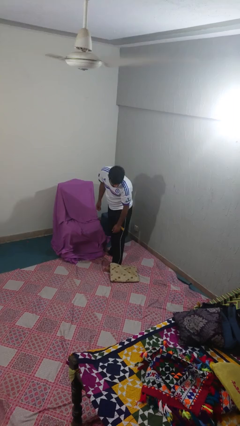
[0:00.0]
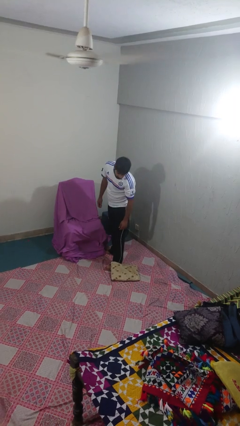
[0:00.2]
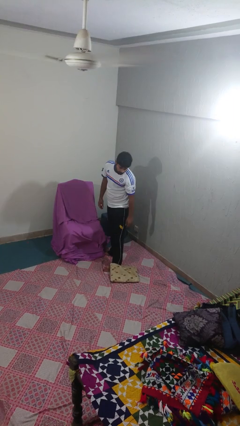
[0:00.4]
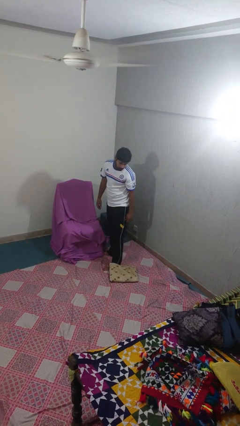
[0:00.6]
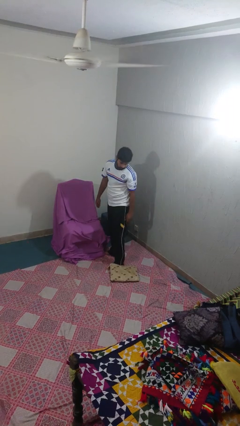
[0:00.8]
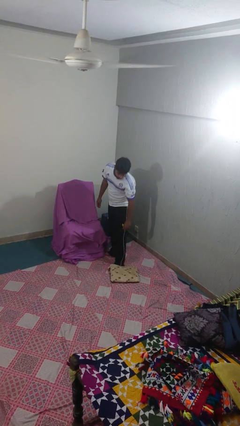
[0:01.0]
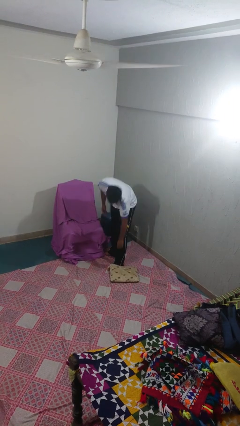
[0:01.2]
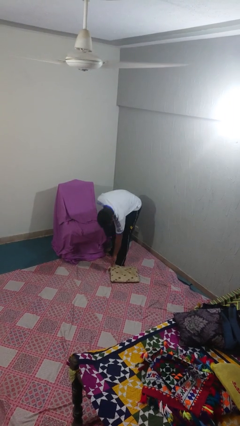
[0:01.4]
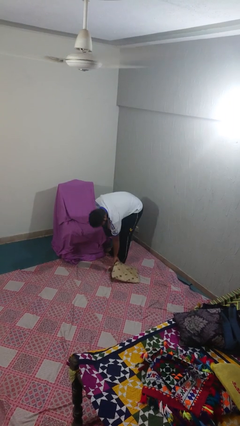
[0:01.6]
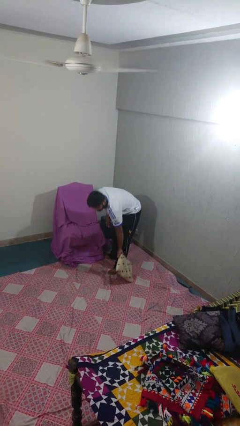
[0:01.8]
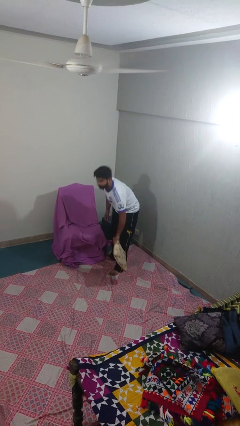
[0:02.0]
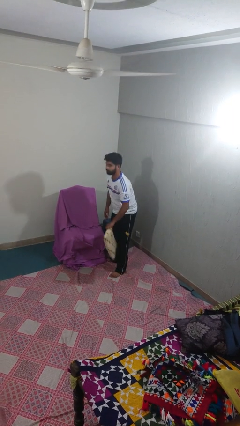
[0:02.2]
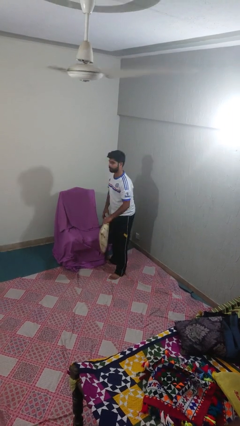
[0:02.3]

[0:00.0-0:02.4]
person picks up object from floor

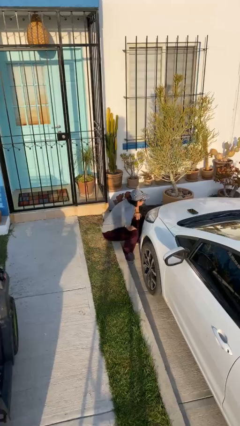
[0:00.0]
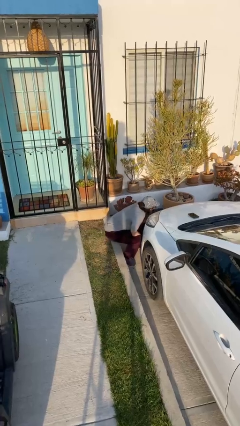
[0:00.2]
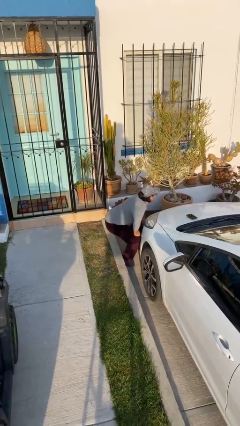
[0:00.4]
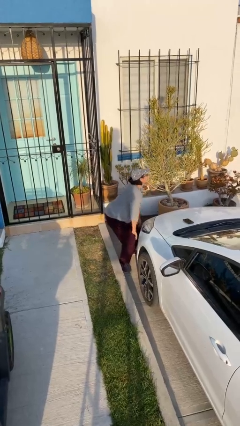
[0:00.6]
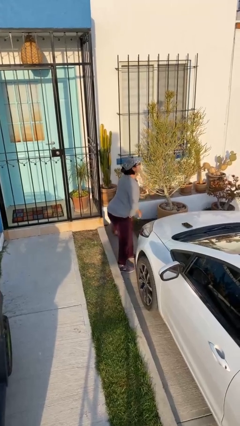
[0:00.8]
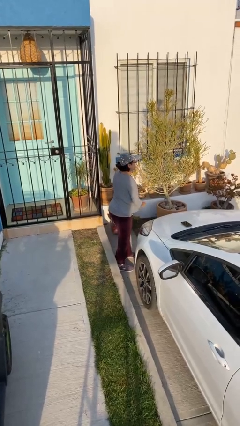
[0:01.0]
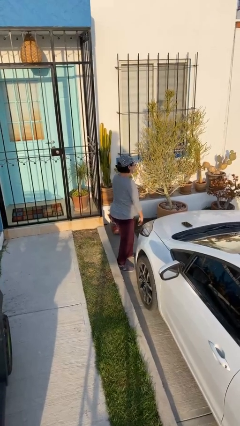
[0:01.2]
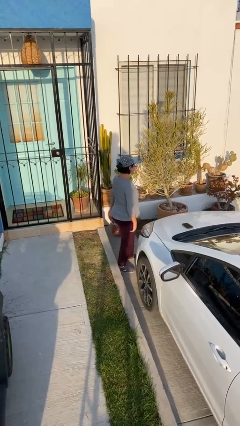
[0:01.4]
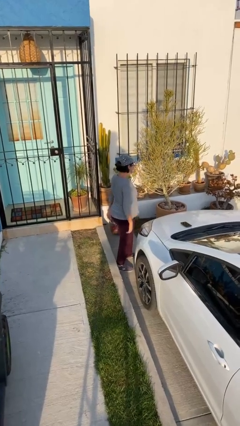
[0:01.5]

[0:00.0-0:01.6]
person stands up

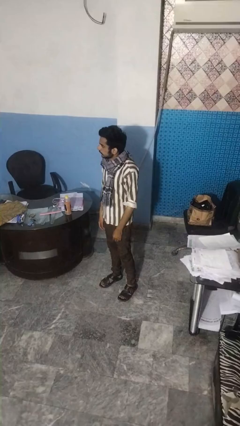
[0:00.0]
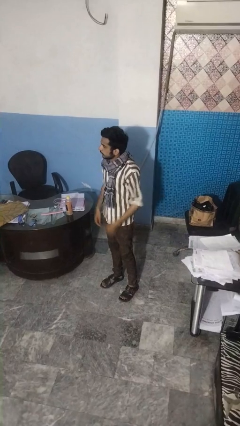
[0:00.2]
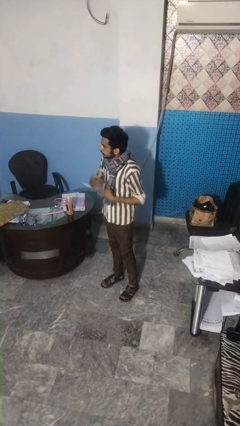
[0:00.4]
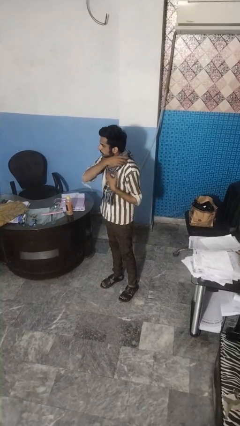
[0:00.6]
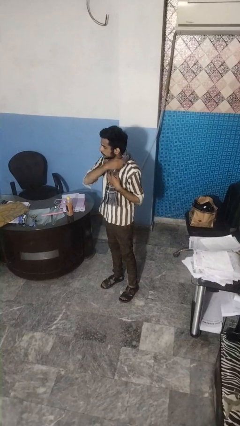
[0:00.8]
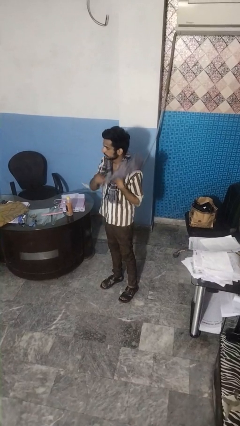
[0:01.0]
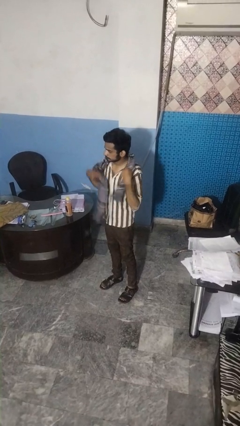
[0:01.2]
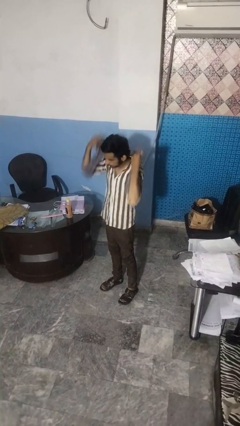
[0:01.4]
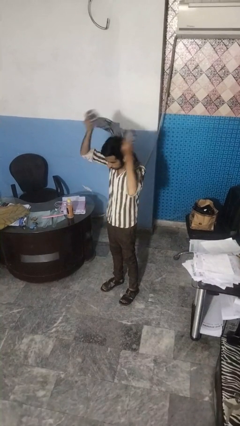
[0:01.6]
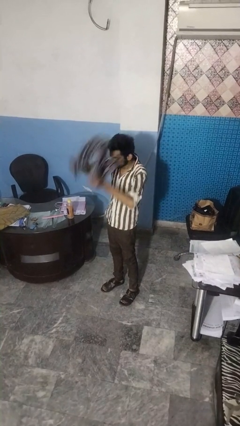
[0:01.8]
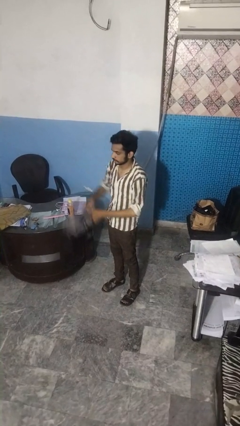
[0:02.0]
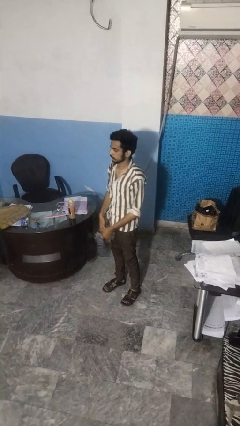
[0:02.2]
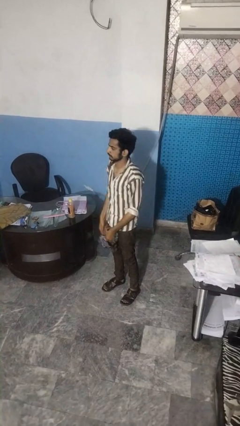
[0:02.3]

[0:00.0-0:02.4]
person takes off scarf

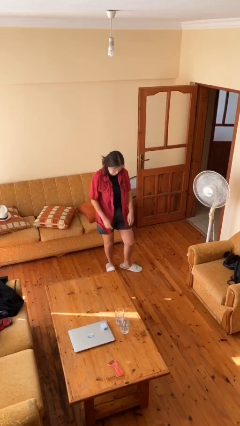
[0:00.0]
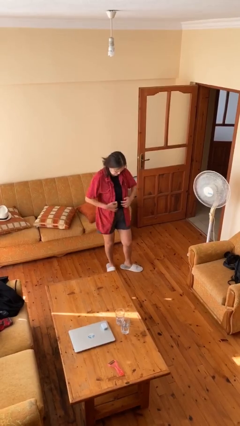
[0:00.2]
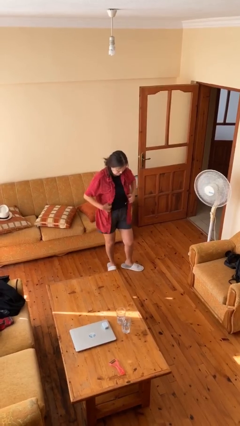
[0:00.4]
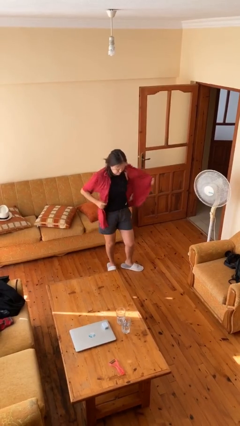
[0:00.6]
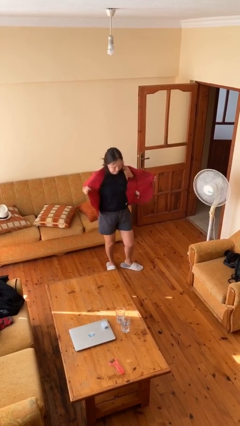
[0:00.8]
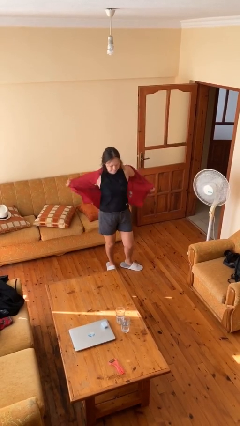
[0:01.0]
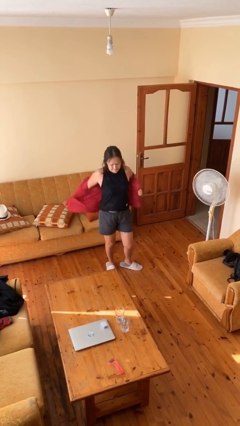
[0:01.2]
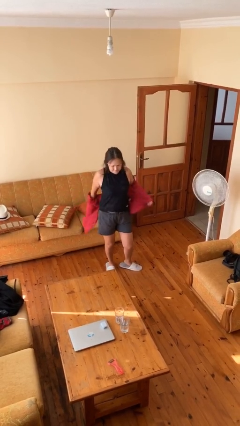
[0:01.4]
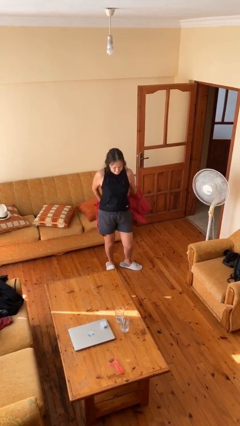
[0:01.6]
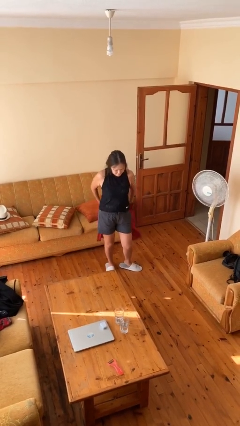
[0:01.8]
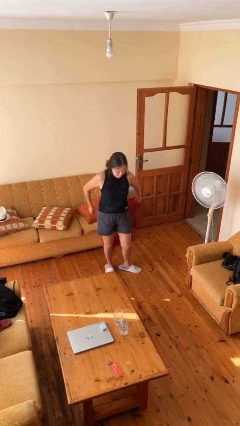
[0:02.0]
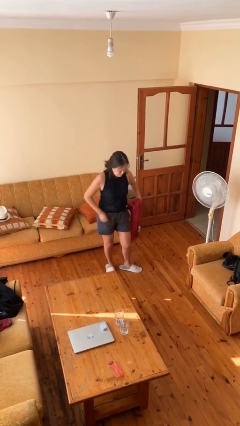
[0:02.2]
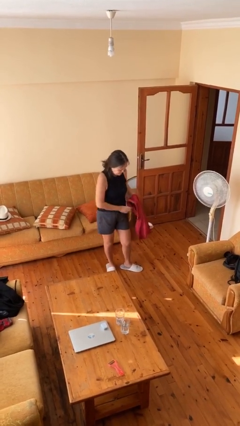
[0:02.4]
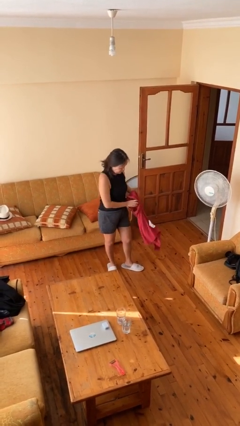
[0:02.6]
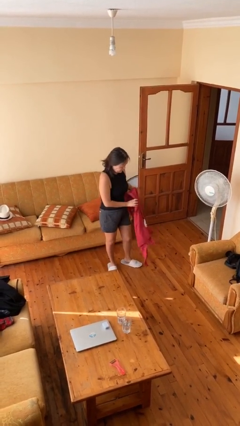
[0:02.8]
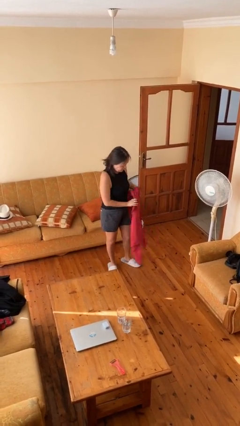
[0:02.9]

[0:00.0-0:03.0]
person takes off shirt

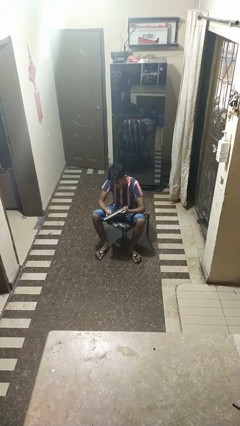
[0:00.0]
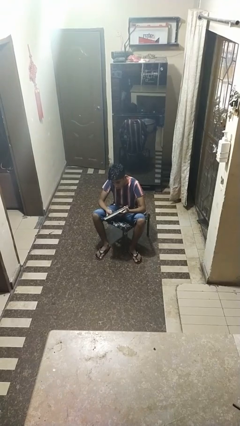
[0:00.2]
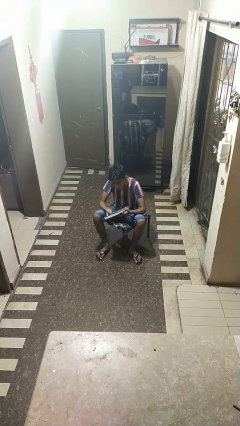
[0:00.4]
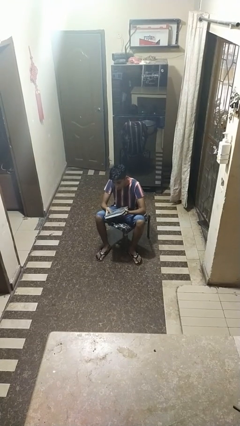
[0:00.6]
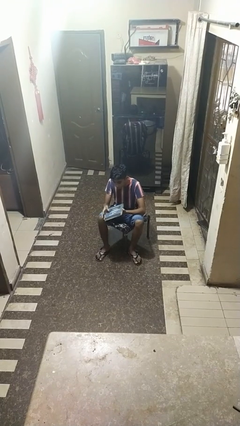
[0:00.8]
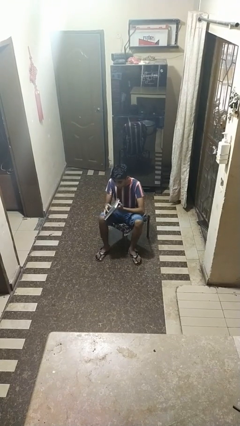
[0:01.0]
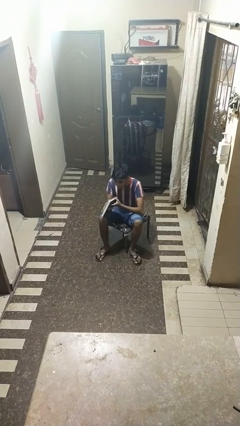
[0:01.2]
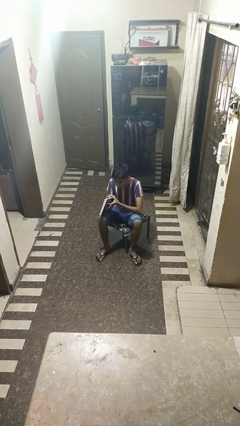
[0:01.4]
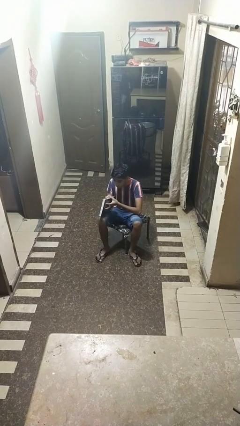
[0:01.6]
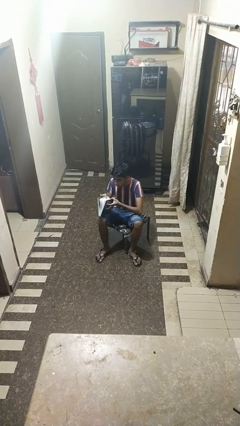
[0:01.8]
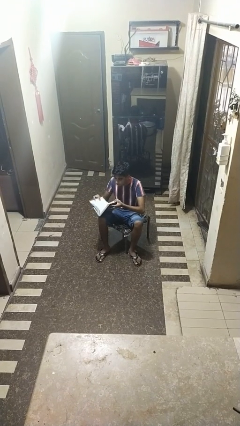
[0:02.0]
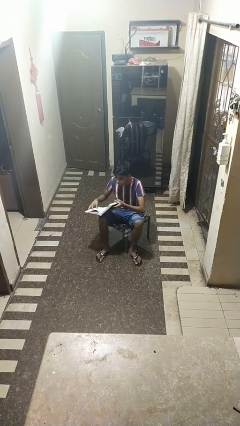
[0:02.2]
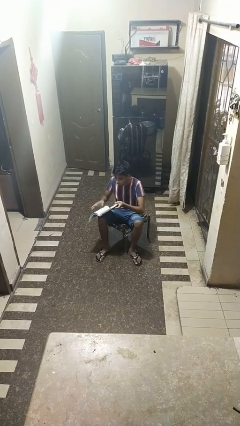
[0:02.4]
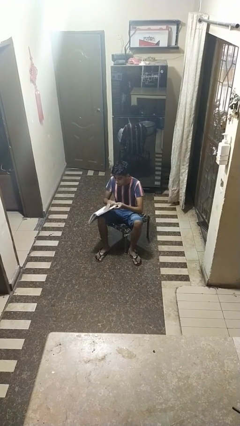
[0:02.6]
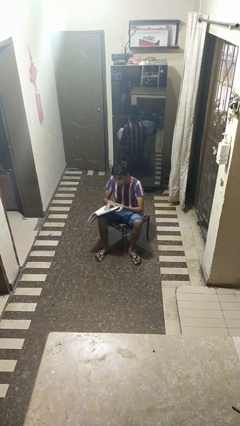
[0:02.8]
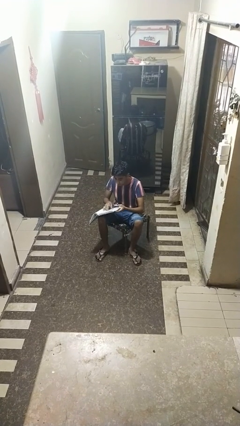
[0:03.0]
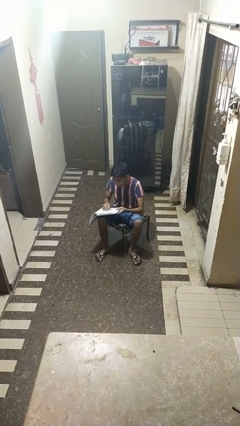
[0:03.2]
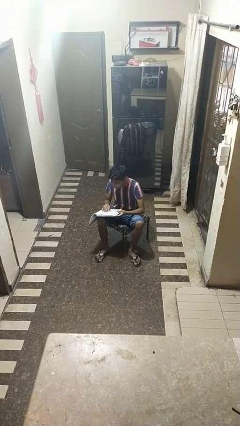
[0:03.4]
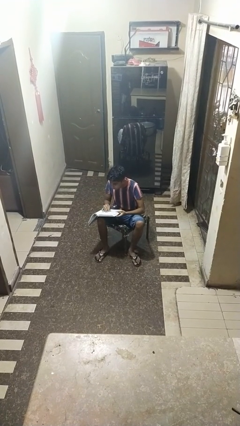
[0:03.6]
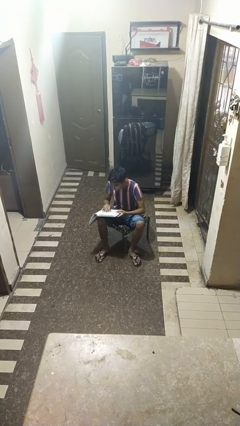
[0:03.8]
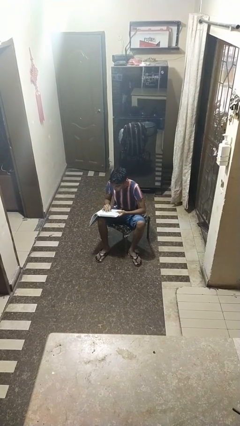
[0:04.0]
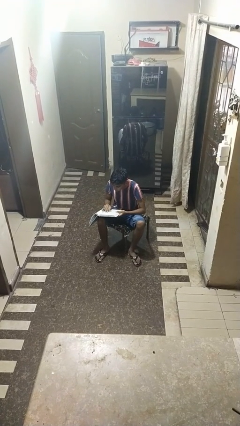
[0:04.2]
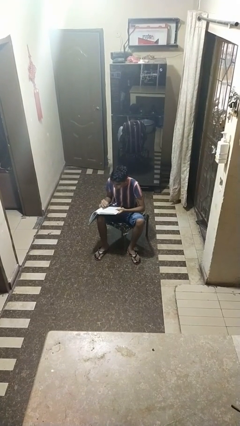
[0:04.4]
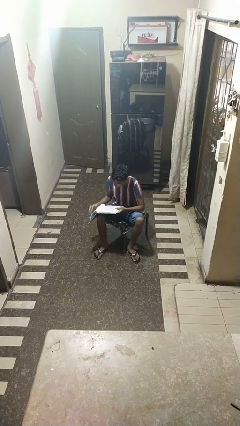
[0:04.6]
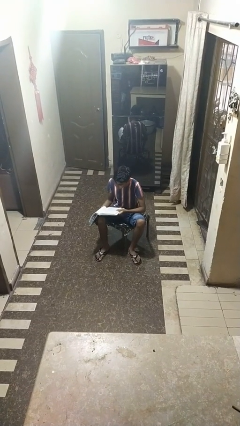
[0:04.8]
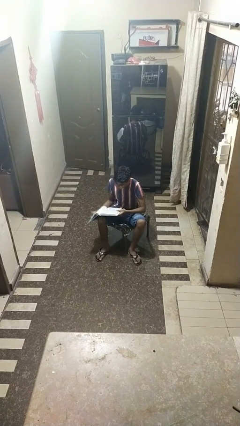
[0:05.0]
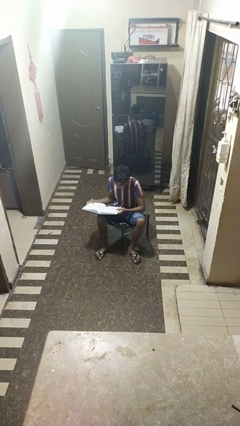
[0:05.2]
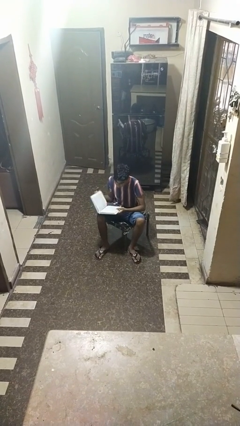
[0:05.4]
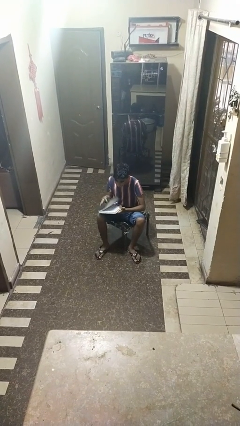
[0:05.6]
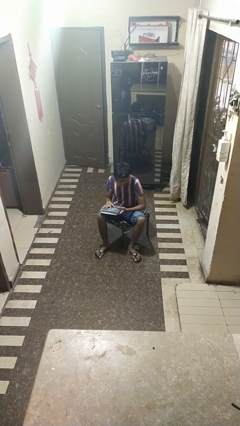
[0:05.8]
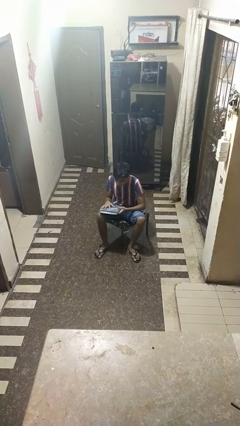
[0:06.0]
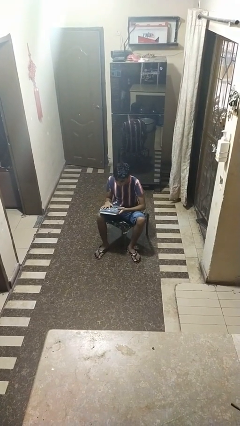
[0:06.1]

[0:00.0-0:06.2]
person reads book

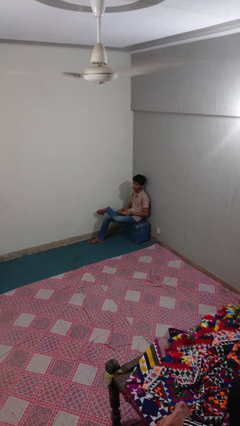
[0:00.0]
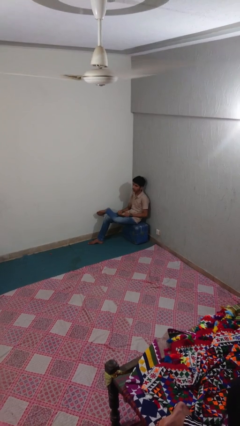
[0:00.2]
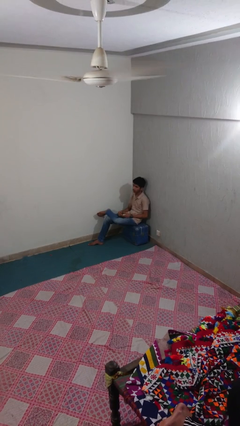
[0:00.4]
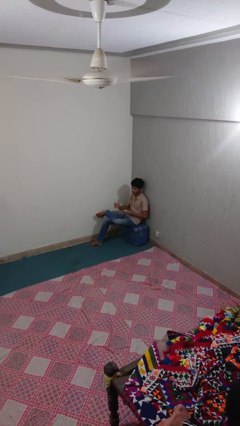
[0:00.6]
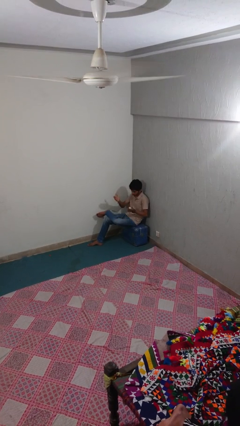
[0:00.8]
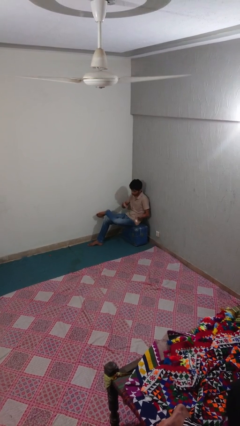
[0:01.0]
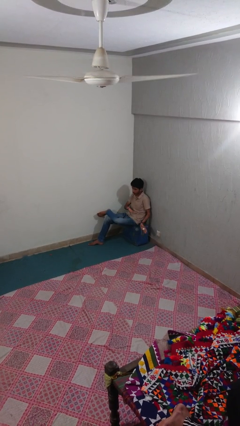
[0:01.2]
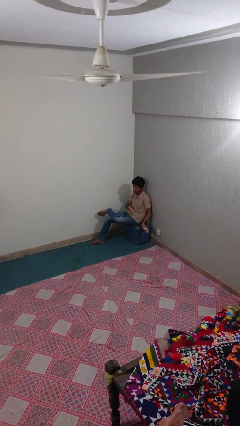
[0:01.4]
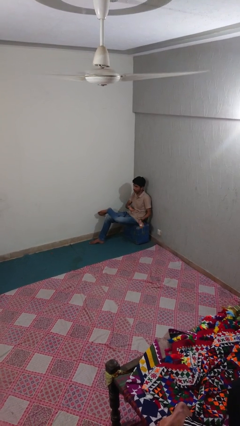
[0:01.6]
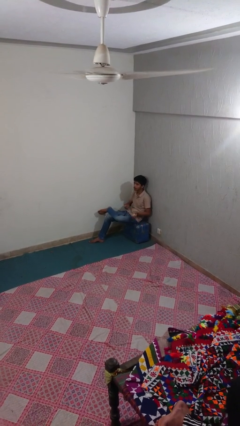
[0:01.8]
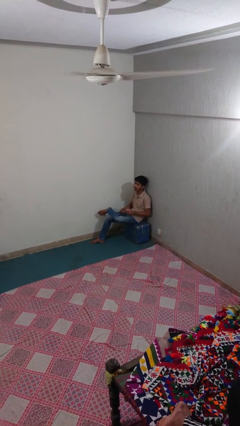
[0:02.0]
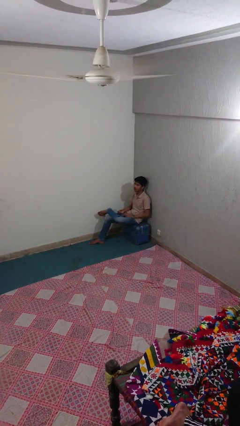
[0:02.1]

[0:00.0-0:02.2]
person gestures come here
